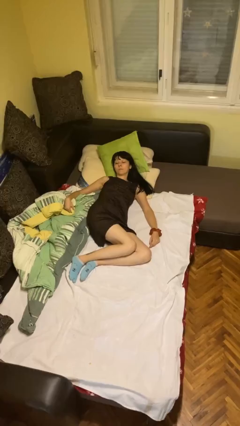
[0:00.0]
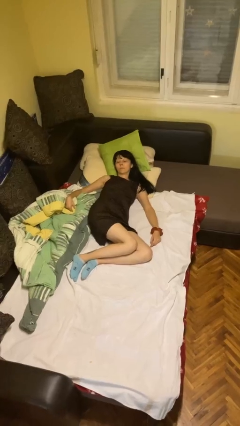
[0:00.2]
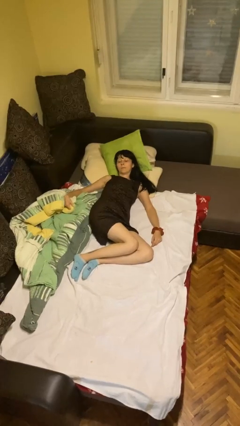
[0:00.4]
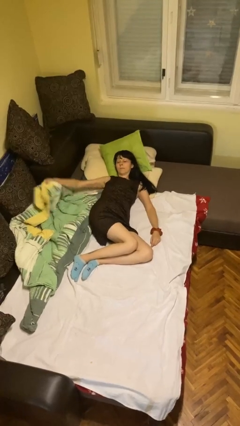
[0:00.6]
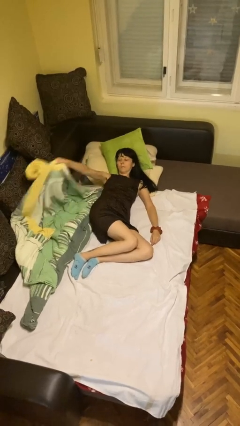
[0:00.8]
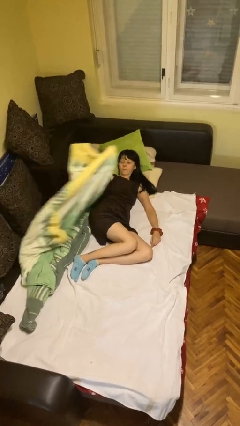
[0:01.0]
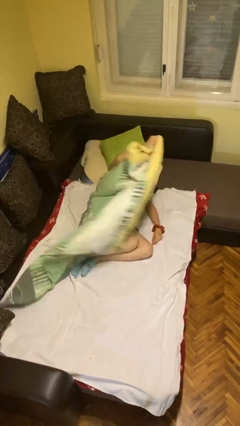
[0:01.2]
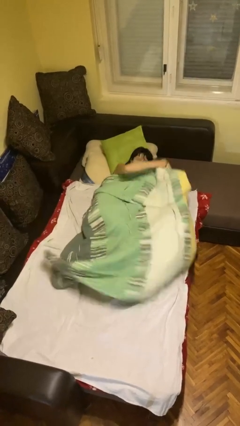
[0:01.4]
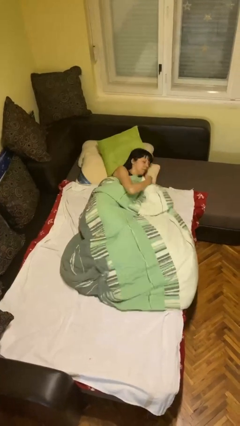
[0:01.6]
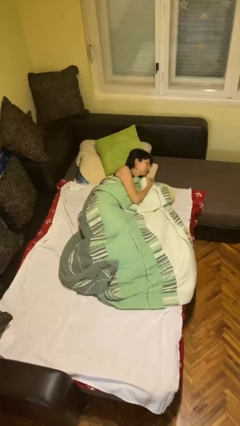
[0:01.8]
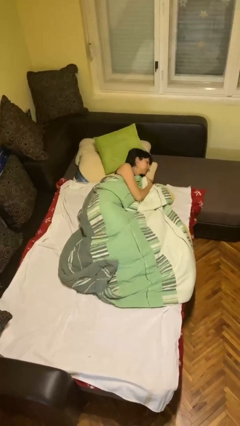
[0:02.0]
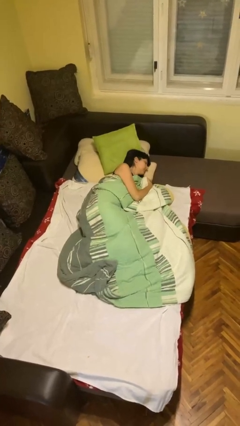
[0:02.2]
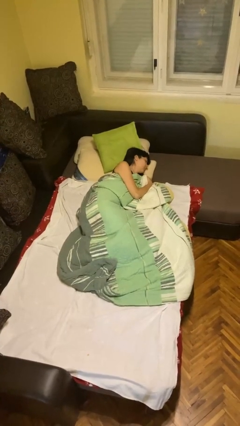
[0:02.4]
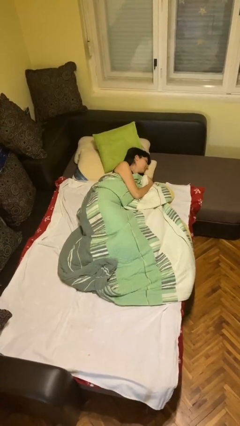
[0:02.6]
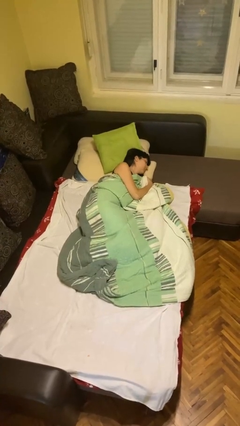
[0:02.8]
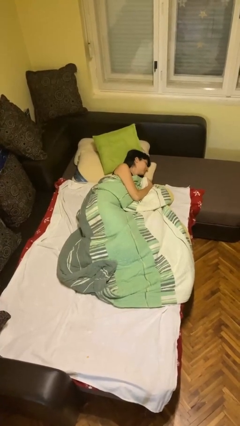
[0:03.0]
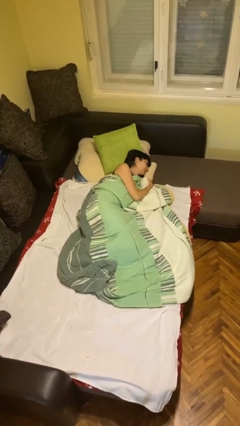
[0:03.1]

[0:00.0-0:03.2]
person covers with bedsheets

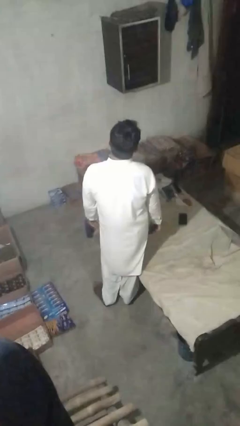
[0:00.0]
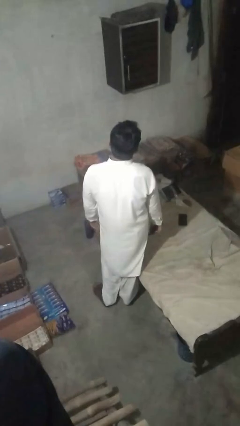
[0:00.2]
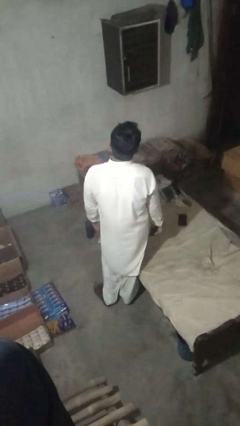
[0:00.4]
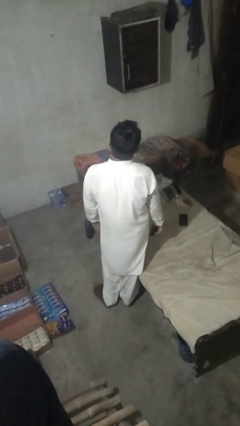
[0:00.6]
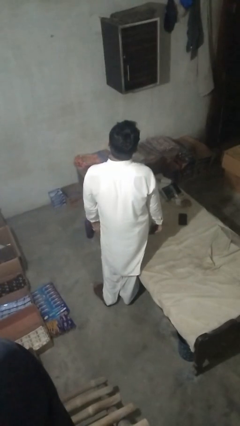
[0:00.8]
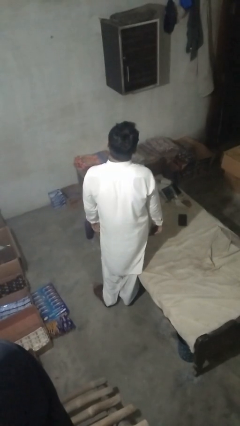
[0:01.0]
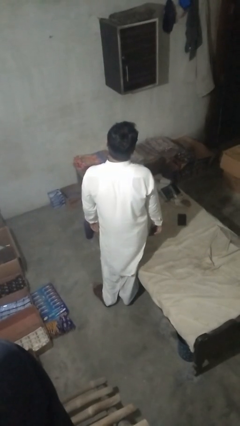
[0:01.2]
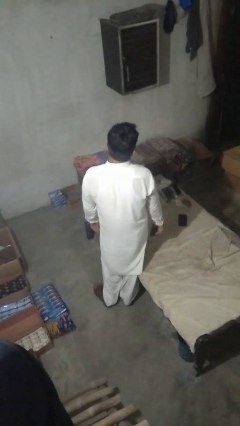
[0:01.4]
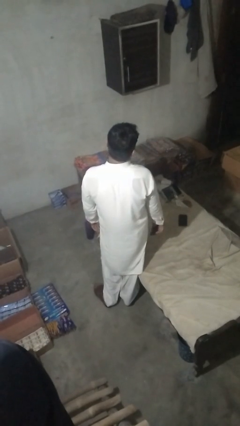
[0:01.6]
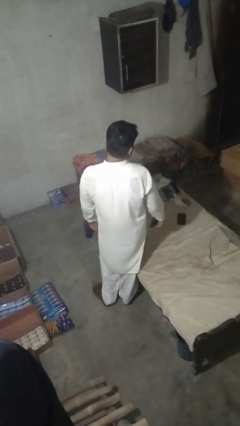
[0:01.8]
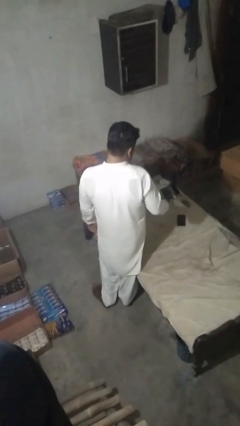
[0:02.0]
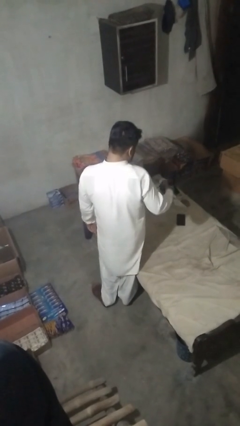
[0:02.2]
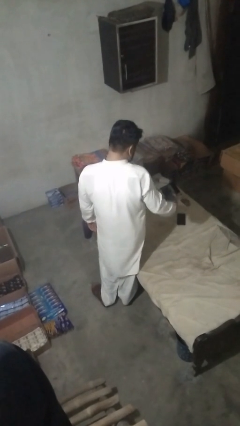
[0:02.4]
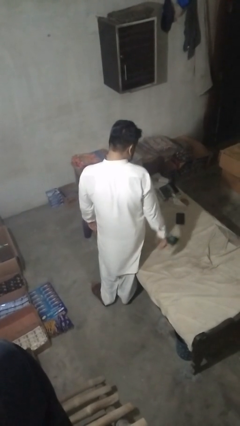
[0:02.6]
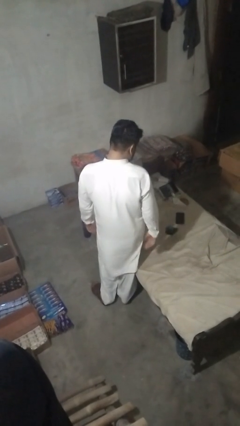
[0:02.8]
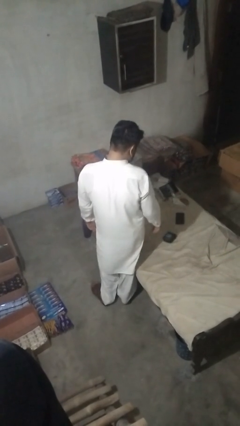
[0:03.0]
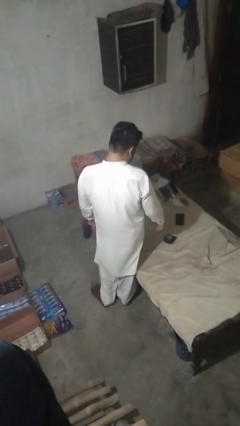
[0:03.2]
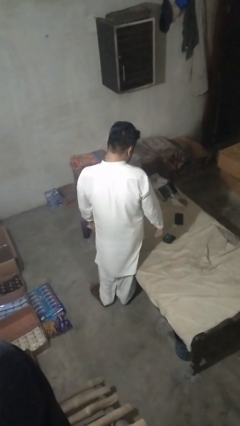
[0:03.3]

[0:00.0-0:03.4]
person throws object on bed

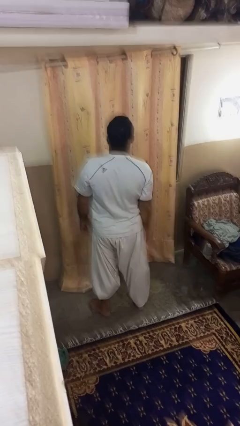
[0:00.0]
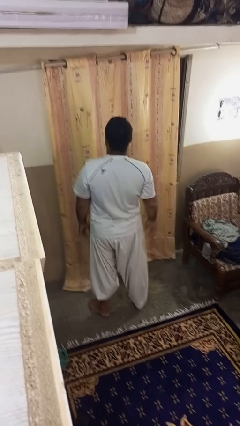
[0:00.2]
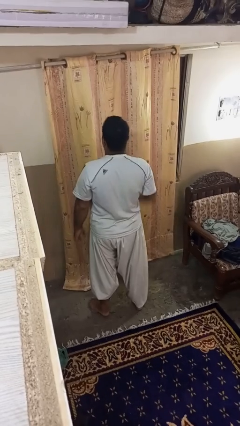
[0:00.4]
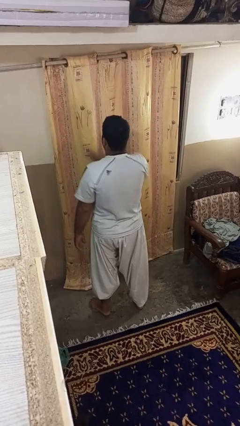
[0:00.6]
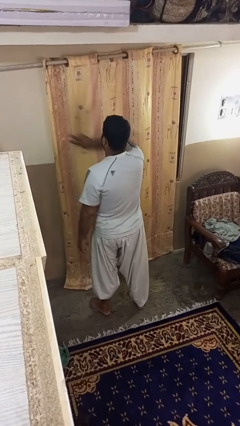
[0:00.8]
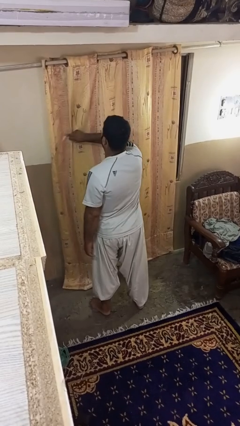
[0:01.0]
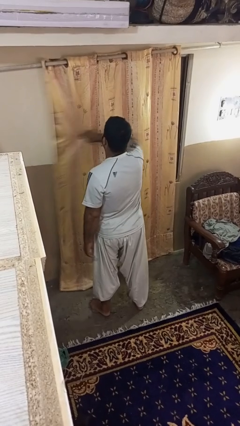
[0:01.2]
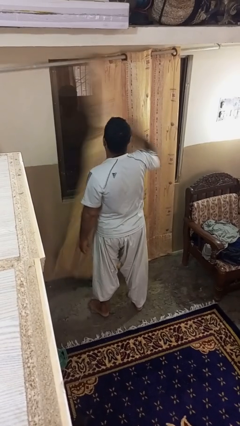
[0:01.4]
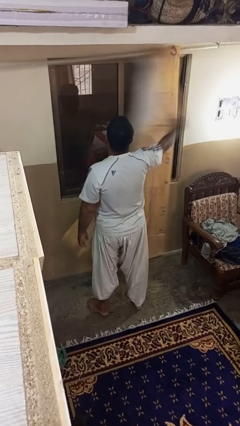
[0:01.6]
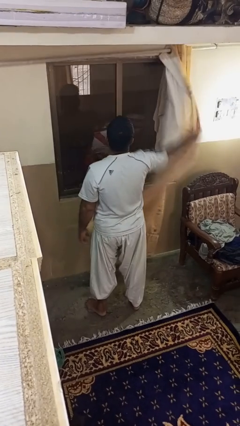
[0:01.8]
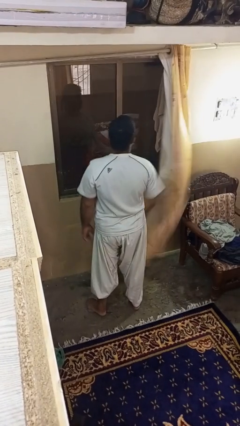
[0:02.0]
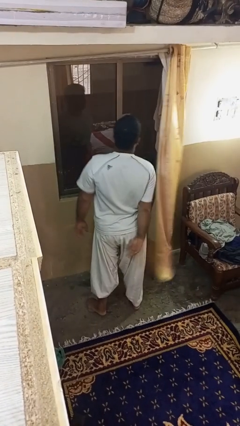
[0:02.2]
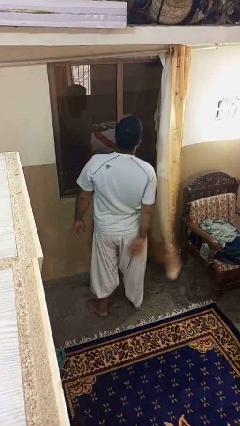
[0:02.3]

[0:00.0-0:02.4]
person opens curtains

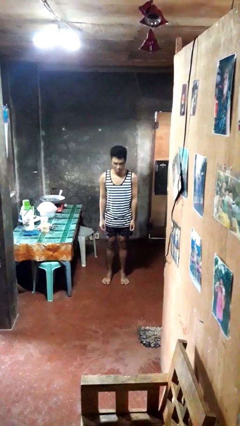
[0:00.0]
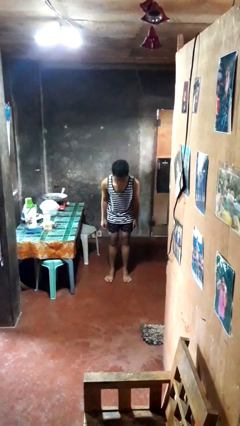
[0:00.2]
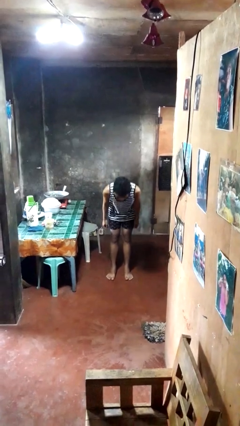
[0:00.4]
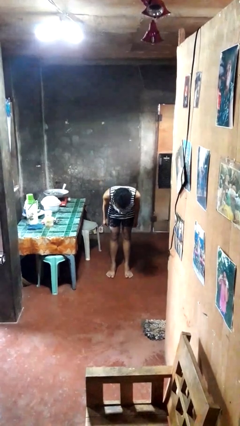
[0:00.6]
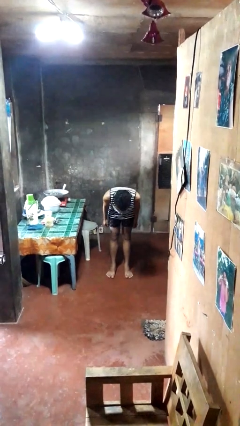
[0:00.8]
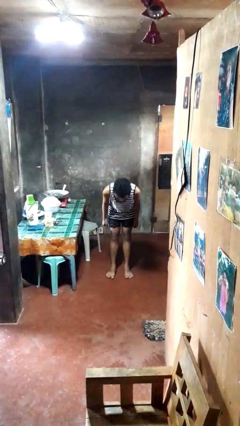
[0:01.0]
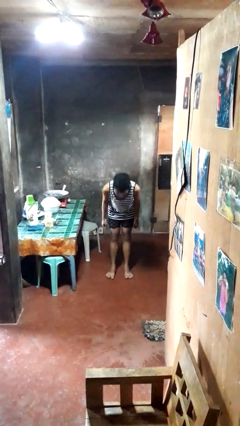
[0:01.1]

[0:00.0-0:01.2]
person bows

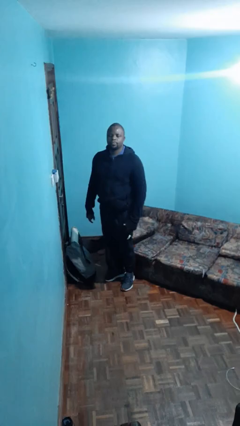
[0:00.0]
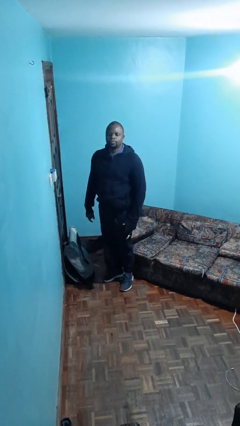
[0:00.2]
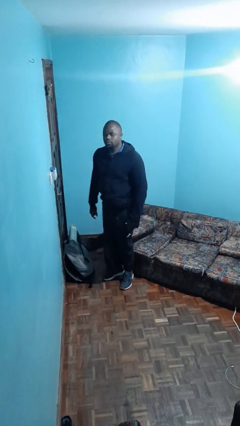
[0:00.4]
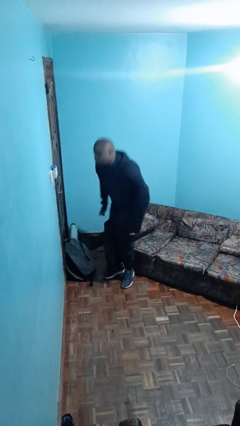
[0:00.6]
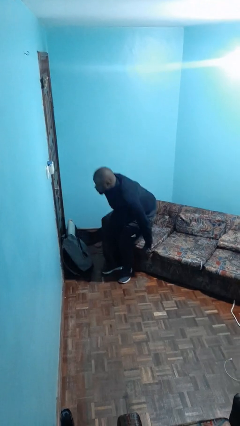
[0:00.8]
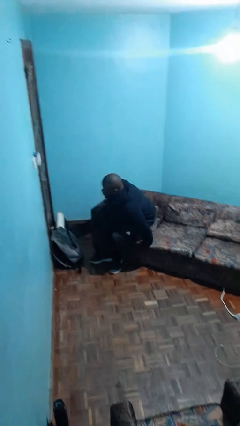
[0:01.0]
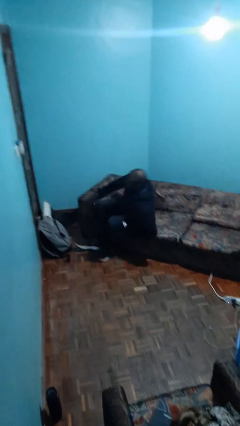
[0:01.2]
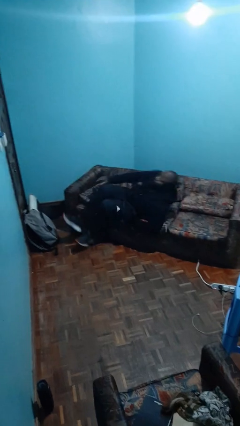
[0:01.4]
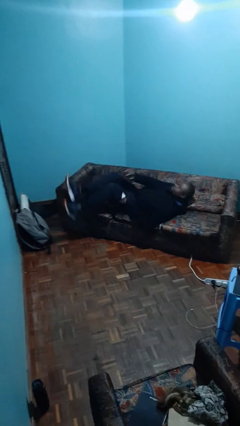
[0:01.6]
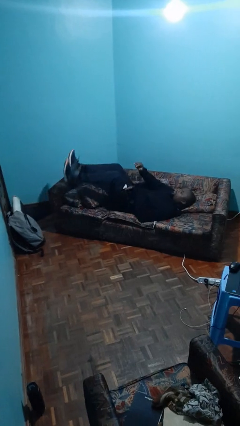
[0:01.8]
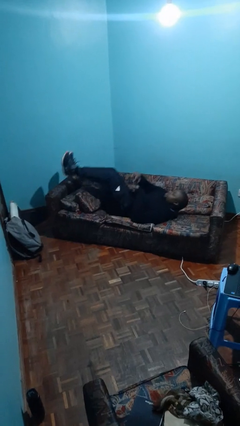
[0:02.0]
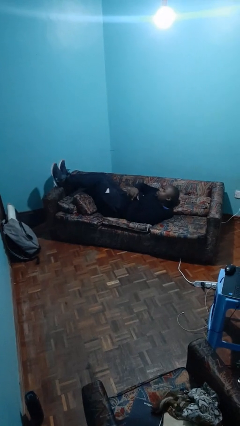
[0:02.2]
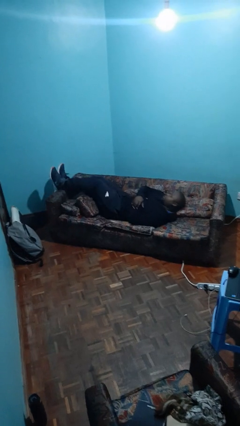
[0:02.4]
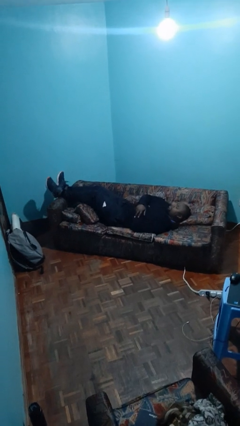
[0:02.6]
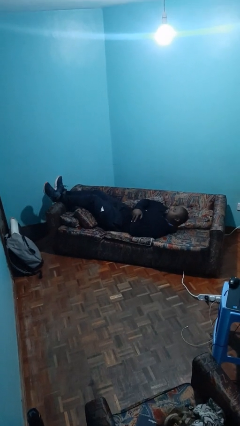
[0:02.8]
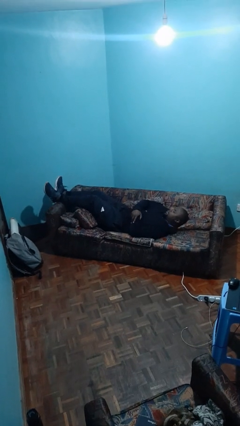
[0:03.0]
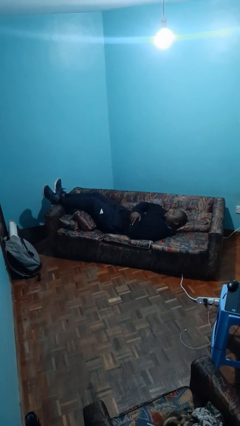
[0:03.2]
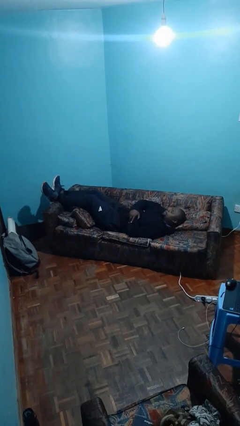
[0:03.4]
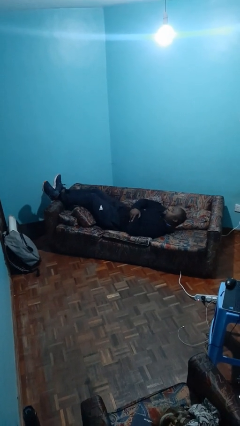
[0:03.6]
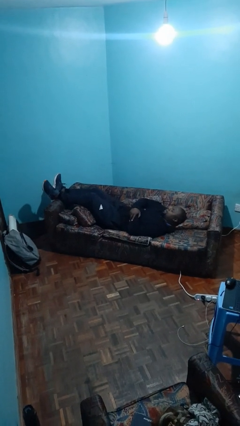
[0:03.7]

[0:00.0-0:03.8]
person lies down on couch

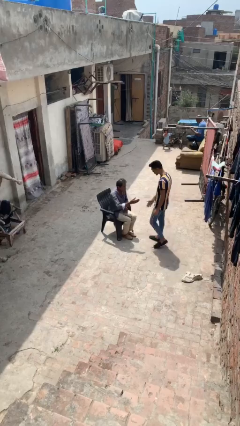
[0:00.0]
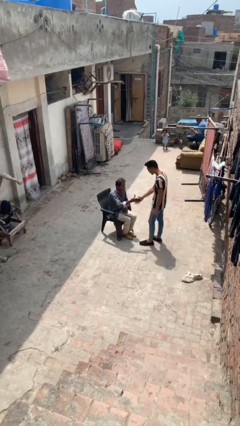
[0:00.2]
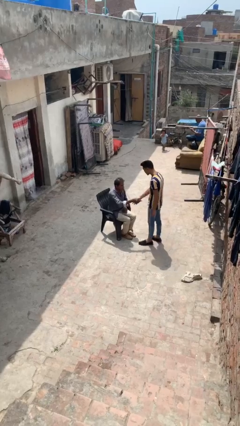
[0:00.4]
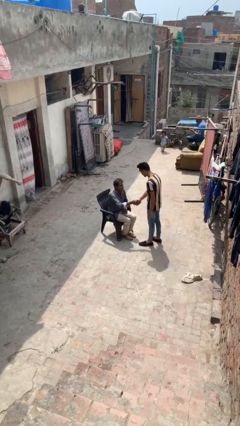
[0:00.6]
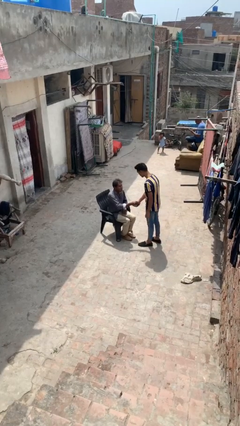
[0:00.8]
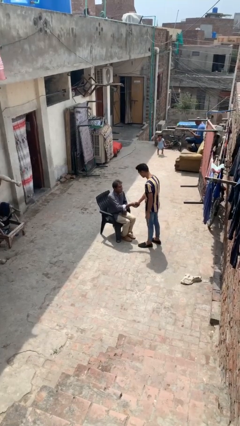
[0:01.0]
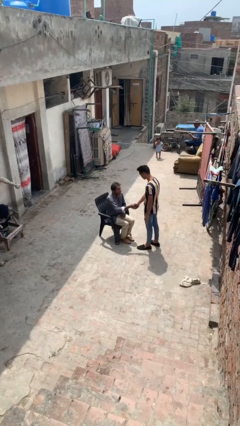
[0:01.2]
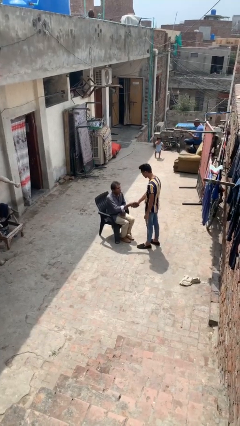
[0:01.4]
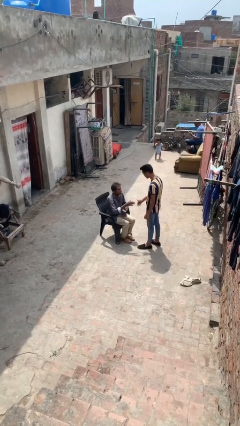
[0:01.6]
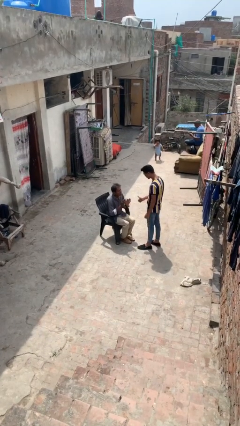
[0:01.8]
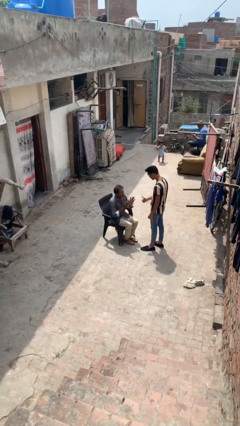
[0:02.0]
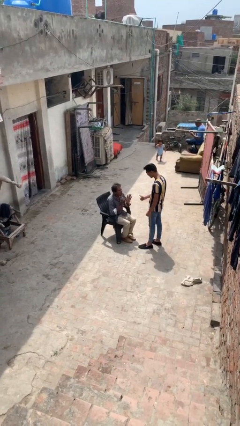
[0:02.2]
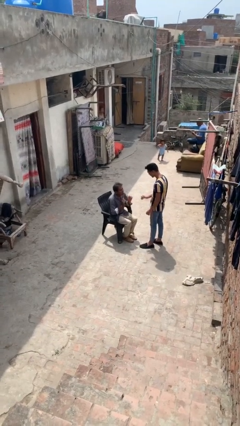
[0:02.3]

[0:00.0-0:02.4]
person shakes hand

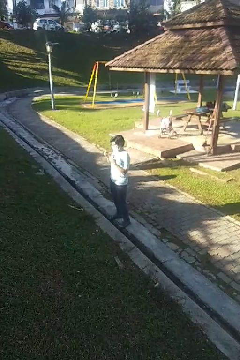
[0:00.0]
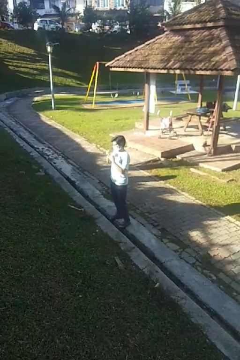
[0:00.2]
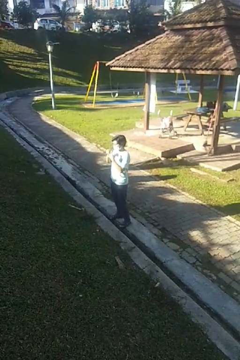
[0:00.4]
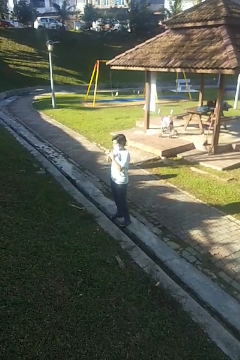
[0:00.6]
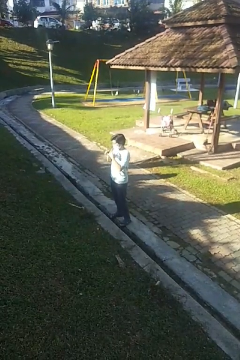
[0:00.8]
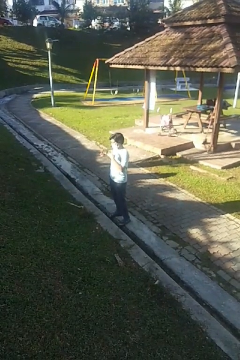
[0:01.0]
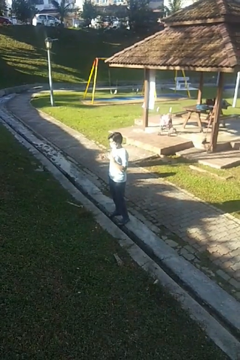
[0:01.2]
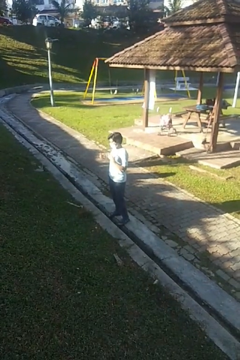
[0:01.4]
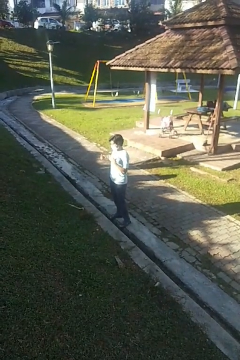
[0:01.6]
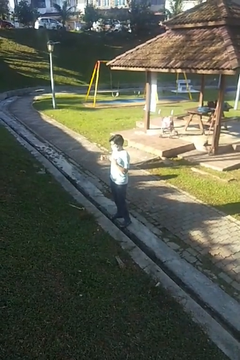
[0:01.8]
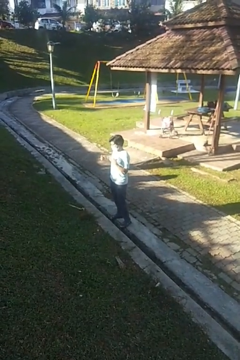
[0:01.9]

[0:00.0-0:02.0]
person puts on ring
